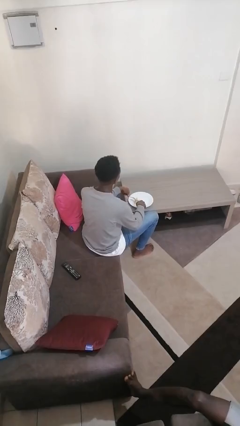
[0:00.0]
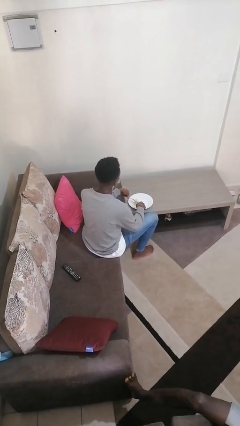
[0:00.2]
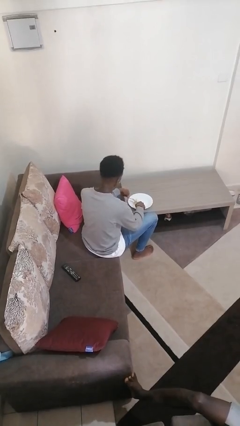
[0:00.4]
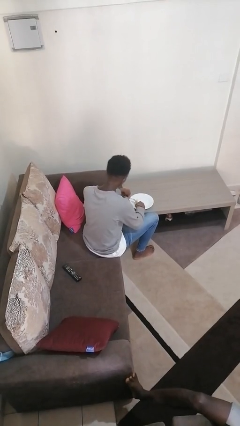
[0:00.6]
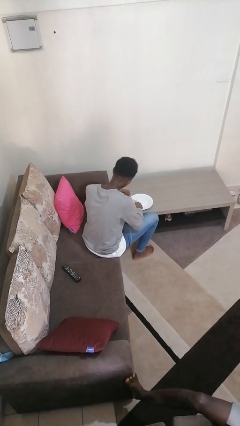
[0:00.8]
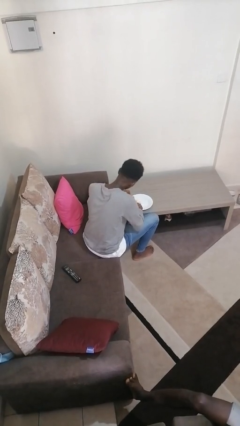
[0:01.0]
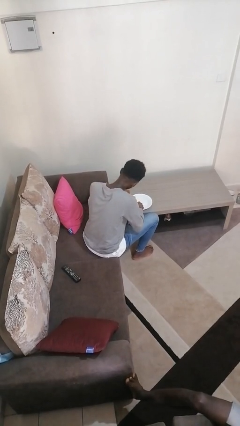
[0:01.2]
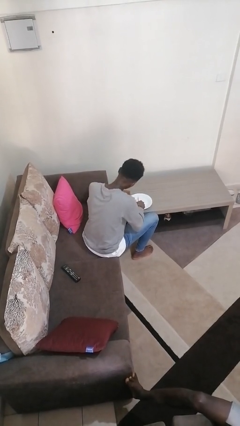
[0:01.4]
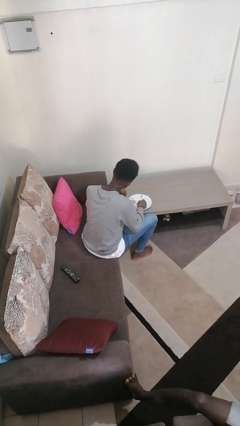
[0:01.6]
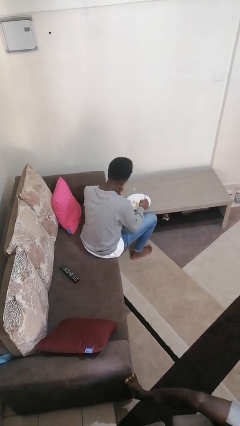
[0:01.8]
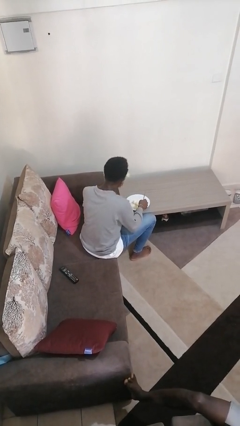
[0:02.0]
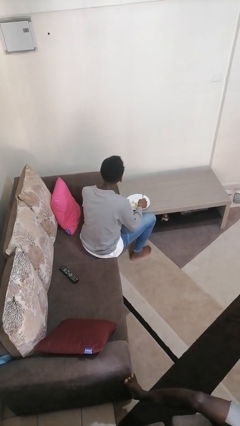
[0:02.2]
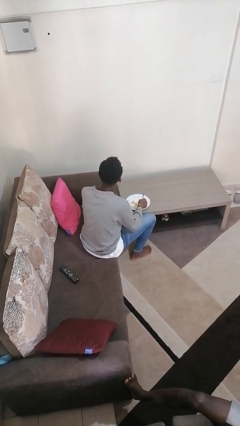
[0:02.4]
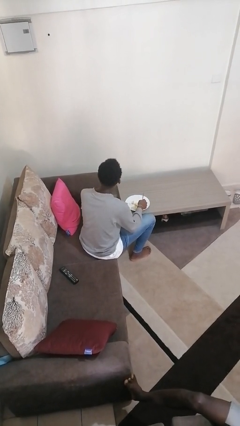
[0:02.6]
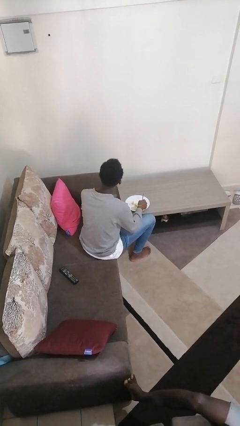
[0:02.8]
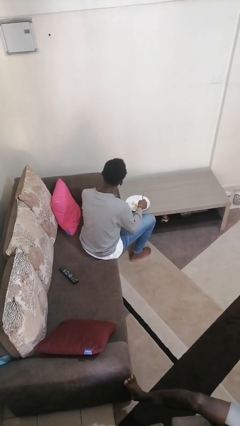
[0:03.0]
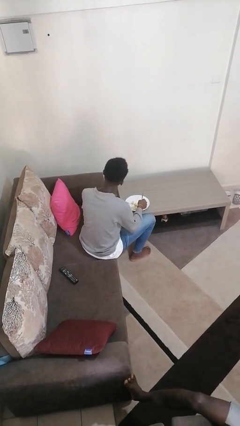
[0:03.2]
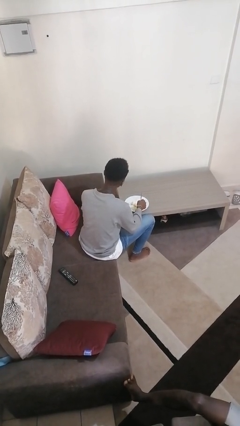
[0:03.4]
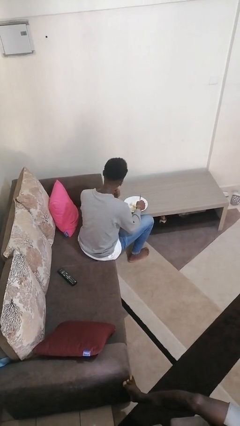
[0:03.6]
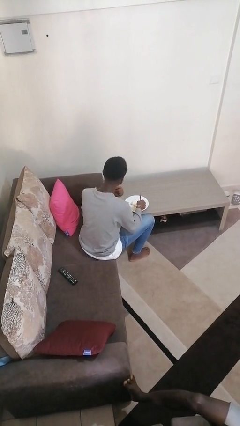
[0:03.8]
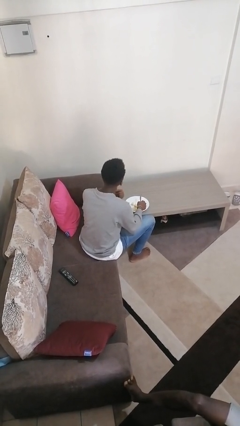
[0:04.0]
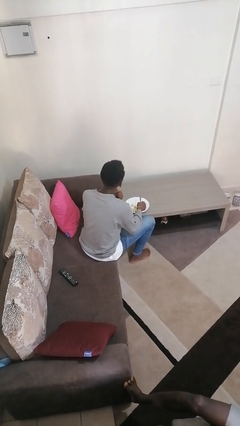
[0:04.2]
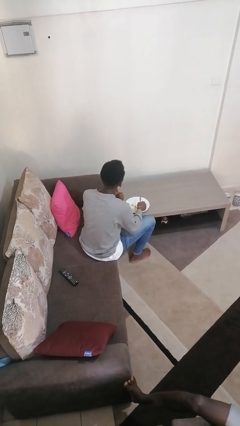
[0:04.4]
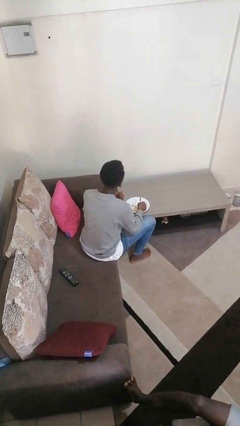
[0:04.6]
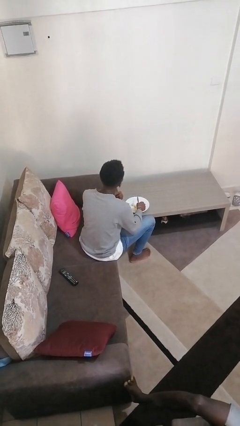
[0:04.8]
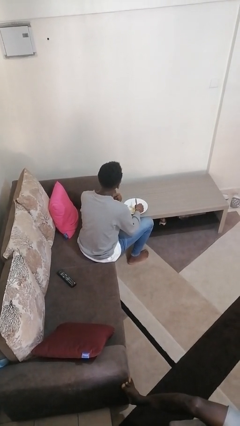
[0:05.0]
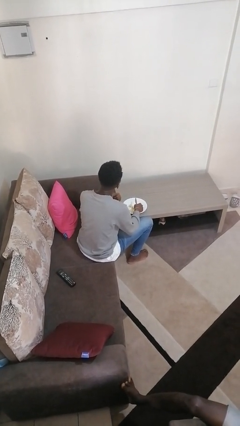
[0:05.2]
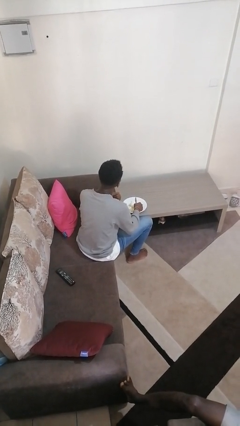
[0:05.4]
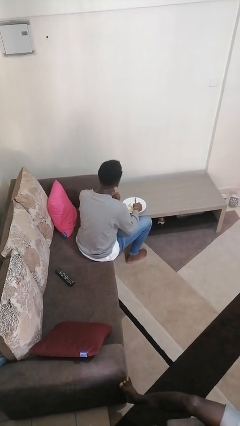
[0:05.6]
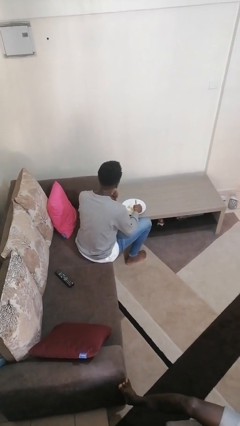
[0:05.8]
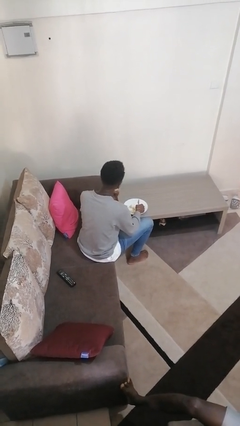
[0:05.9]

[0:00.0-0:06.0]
person eats with utensil

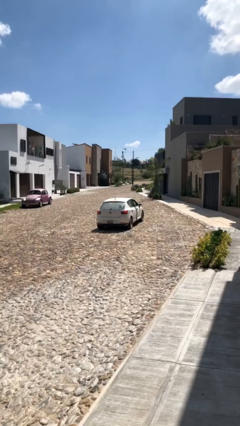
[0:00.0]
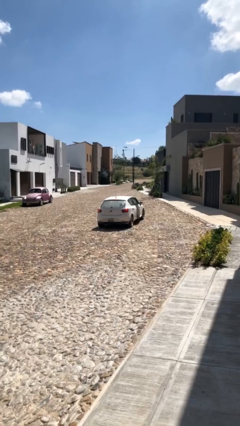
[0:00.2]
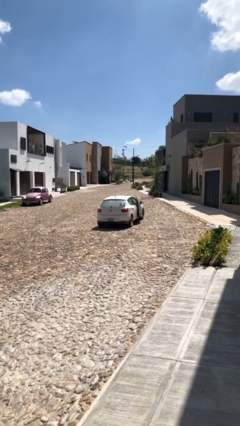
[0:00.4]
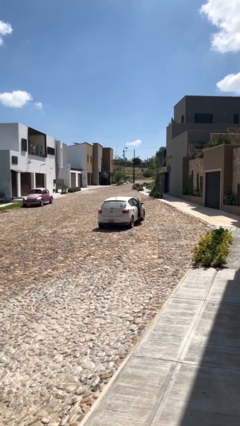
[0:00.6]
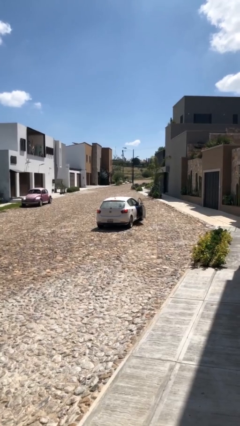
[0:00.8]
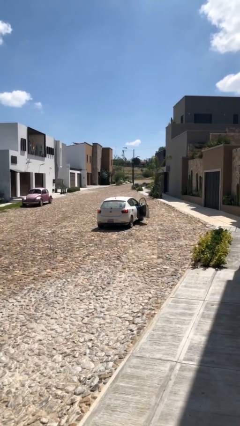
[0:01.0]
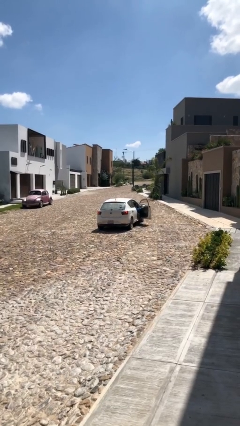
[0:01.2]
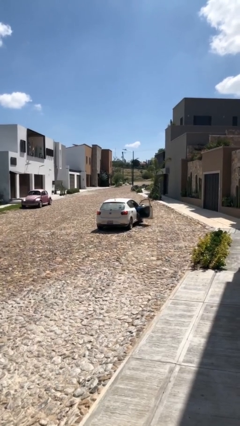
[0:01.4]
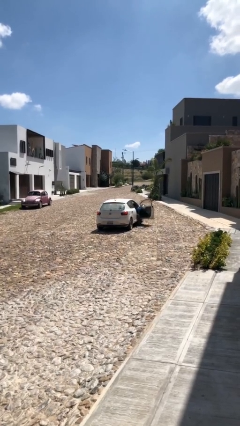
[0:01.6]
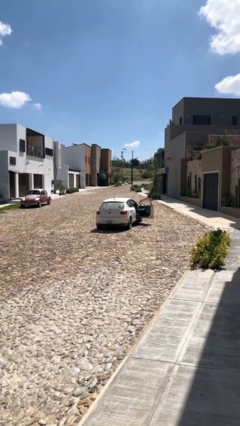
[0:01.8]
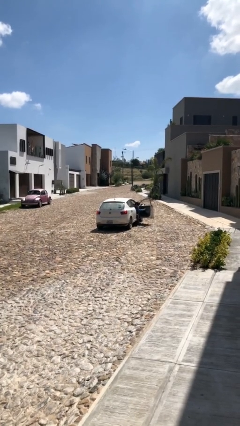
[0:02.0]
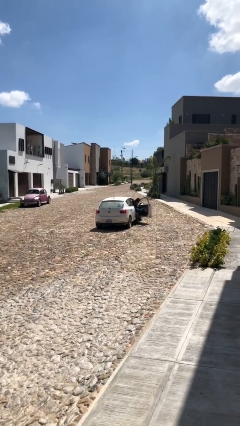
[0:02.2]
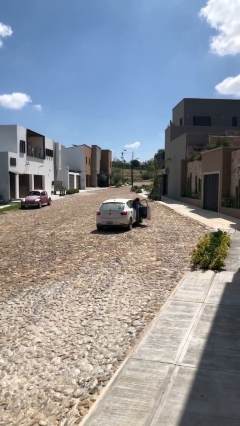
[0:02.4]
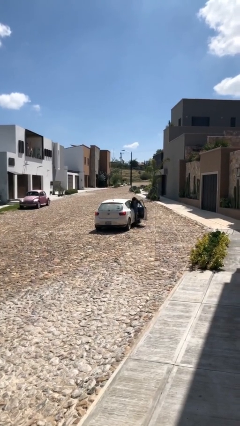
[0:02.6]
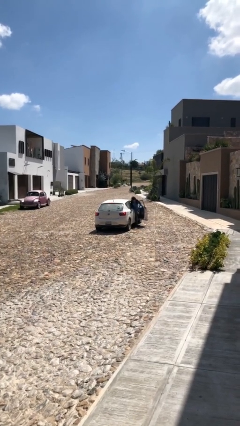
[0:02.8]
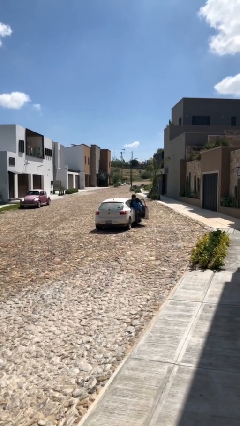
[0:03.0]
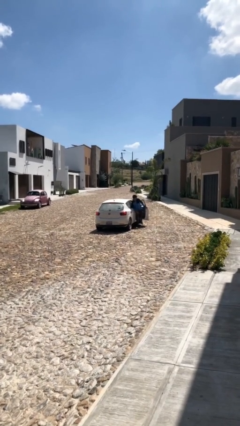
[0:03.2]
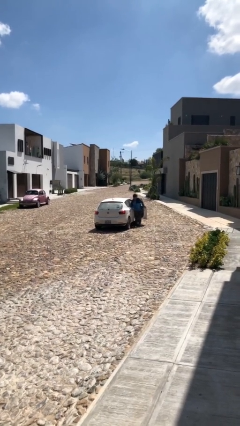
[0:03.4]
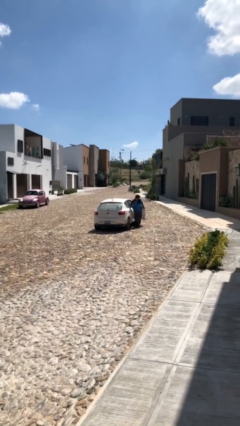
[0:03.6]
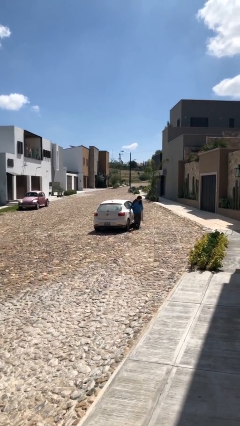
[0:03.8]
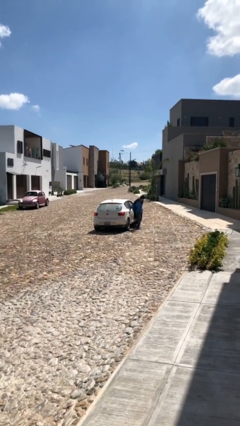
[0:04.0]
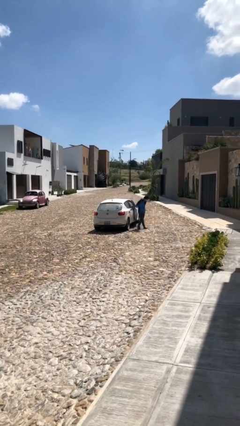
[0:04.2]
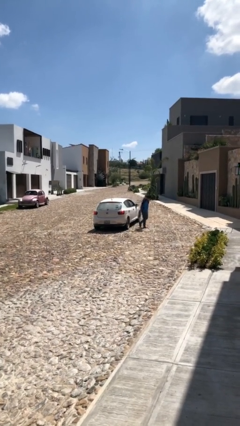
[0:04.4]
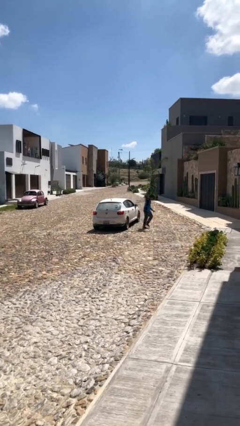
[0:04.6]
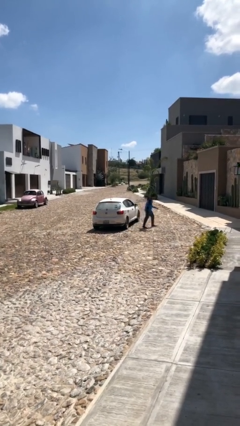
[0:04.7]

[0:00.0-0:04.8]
car drops off person

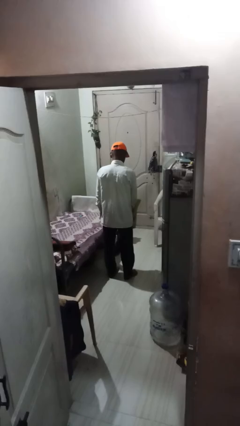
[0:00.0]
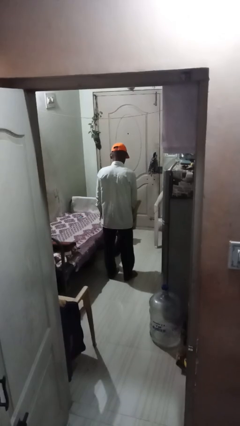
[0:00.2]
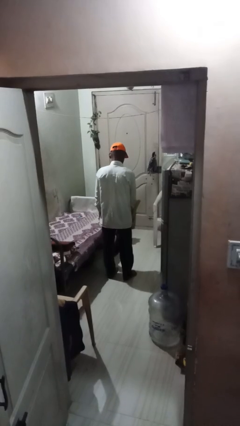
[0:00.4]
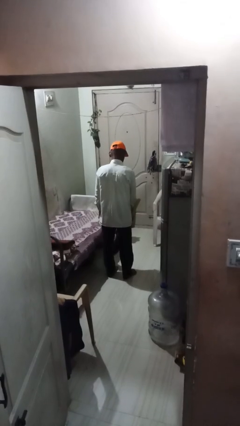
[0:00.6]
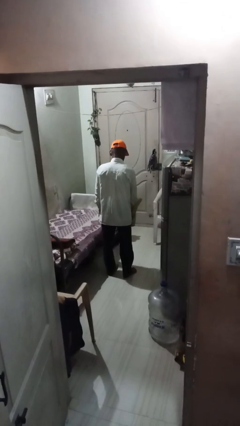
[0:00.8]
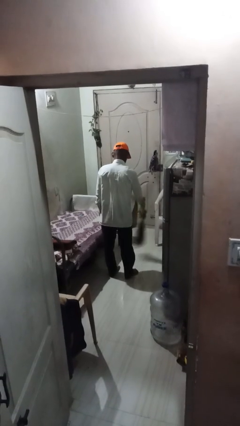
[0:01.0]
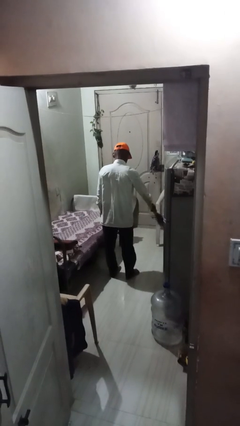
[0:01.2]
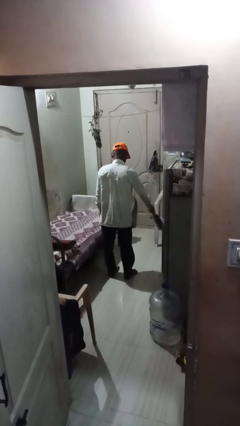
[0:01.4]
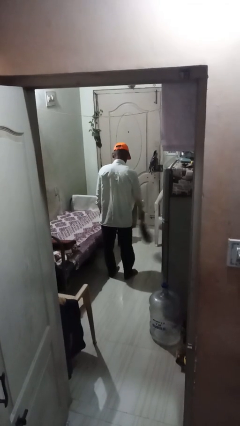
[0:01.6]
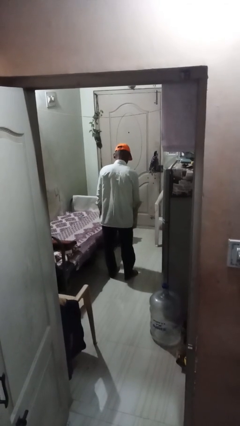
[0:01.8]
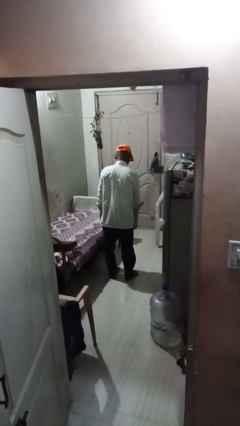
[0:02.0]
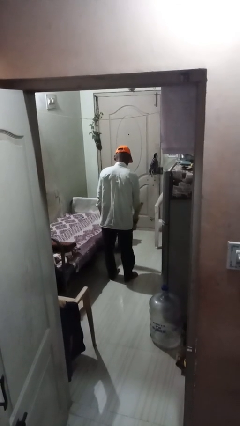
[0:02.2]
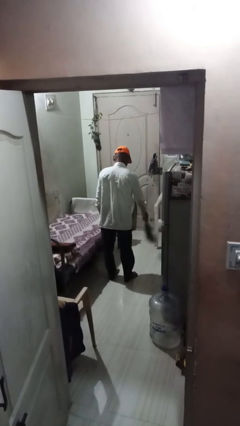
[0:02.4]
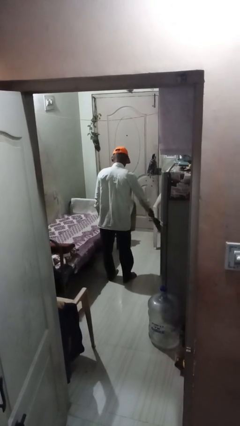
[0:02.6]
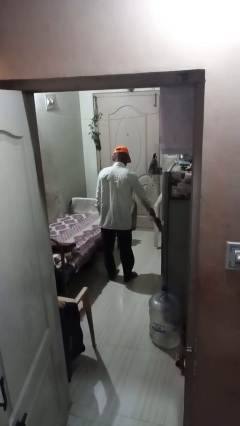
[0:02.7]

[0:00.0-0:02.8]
person mops

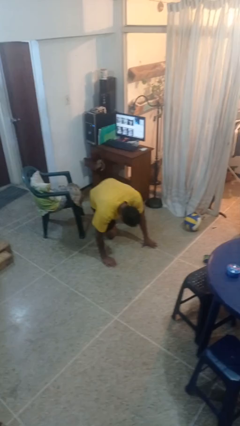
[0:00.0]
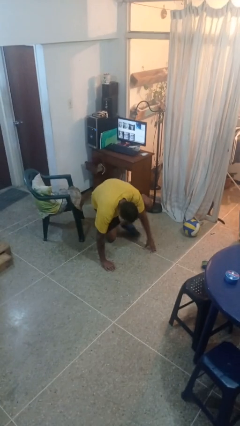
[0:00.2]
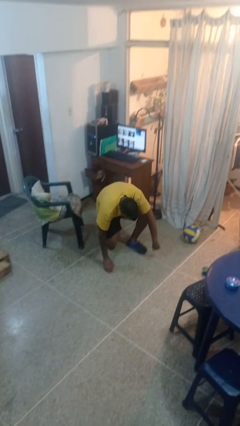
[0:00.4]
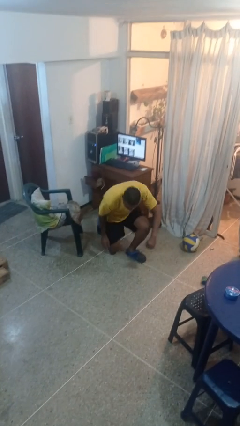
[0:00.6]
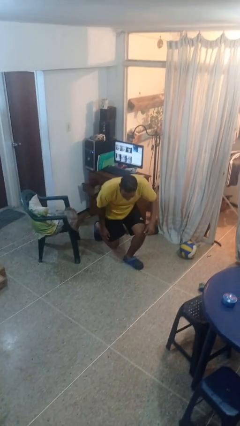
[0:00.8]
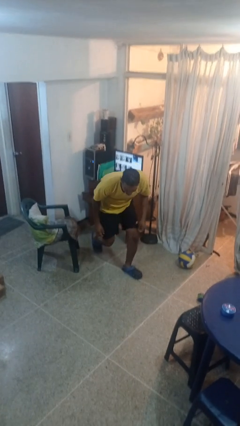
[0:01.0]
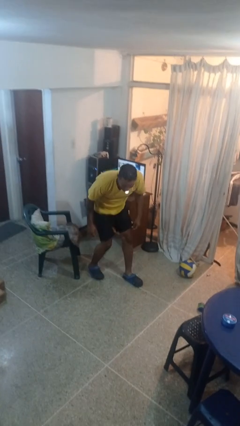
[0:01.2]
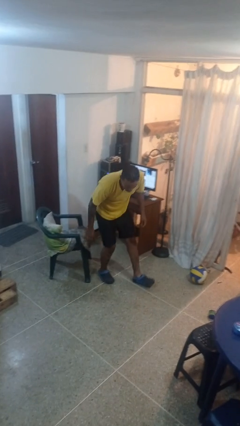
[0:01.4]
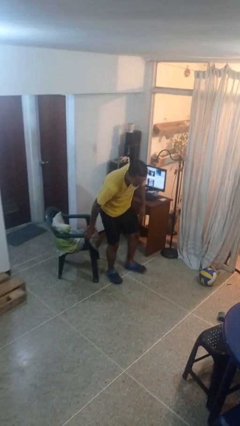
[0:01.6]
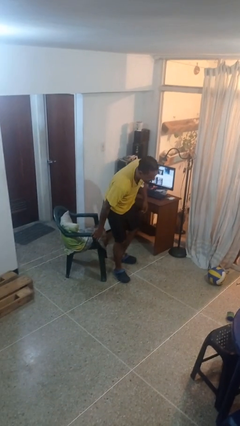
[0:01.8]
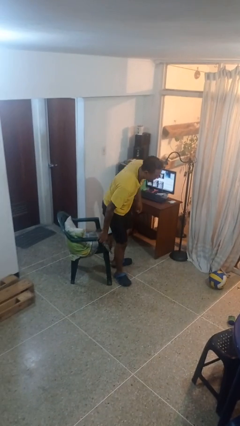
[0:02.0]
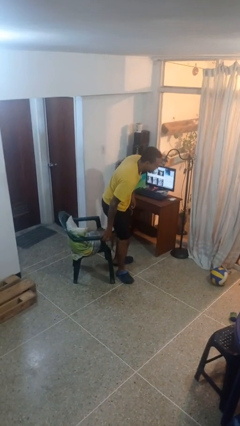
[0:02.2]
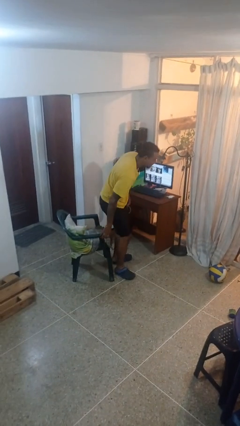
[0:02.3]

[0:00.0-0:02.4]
person stands up from floor

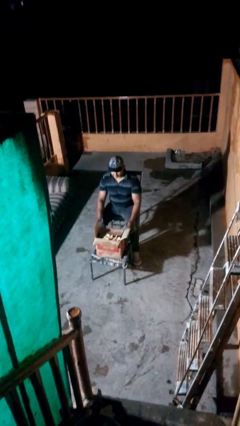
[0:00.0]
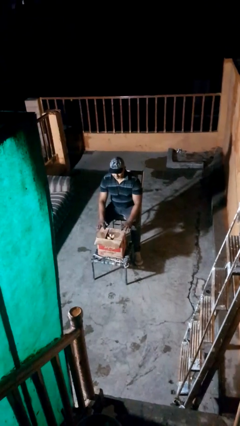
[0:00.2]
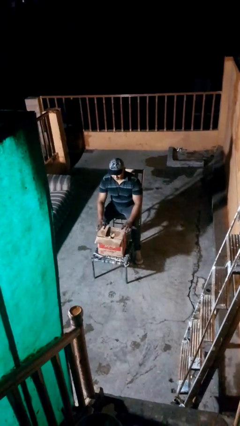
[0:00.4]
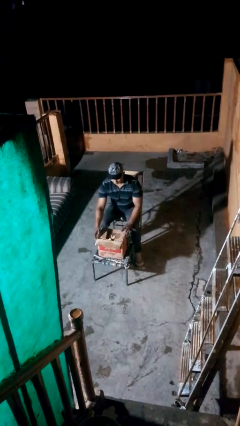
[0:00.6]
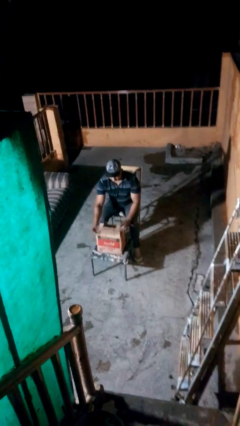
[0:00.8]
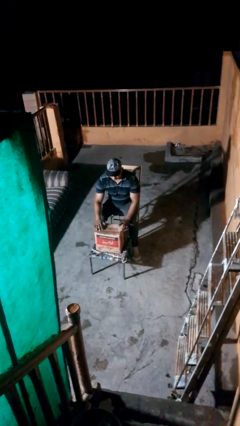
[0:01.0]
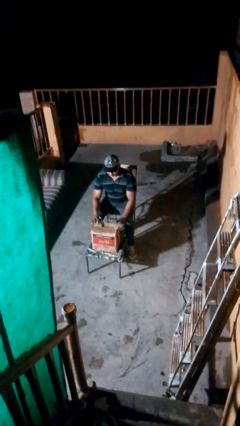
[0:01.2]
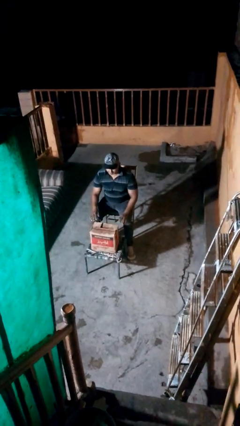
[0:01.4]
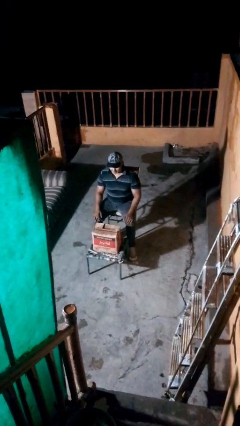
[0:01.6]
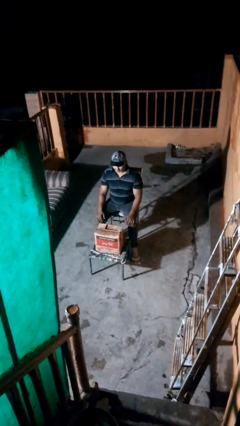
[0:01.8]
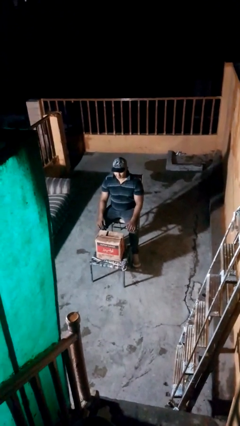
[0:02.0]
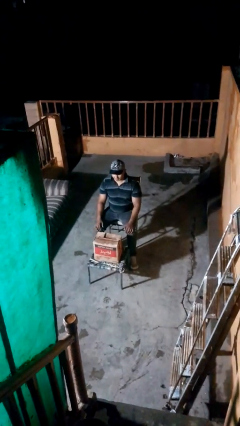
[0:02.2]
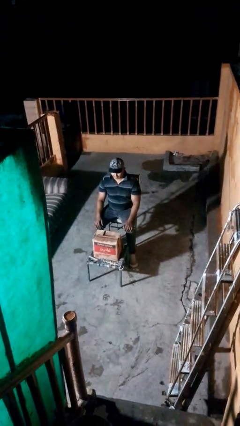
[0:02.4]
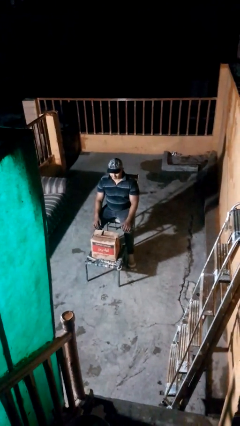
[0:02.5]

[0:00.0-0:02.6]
person closes box
